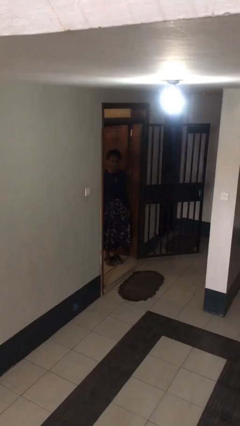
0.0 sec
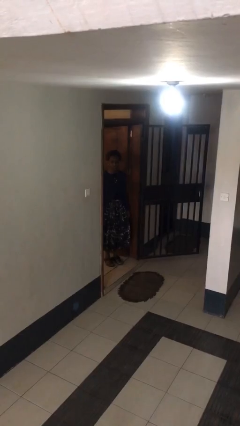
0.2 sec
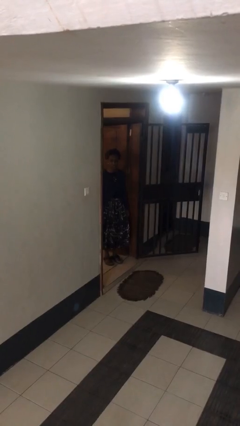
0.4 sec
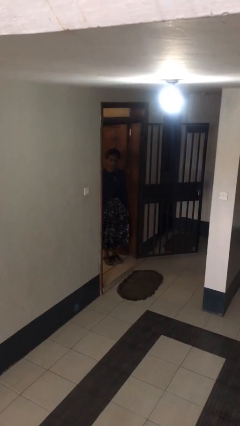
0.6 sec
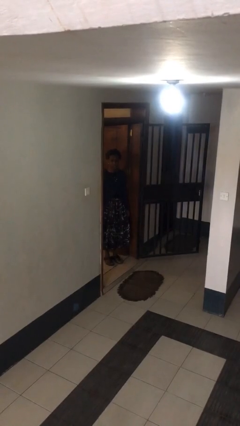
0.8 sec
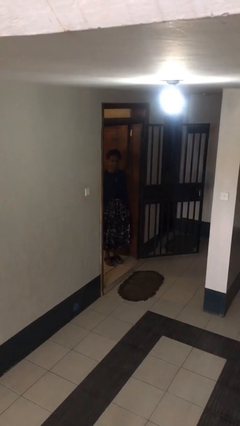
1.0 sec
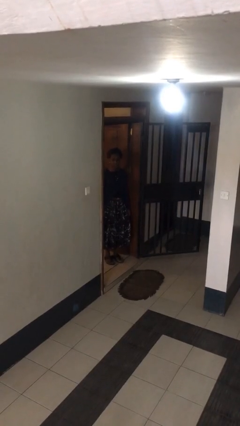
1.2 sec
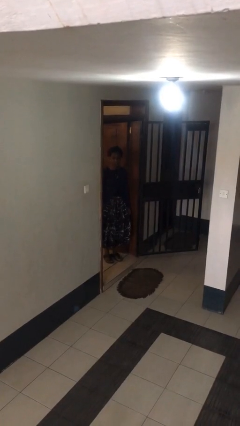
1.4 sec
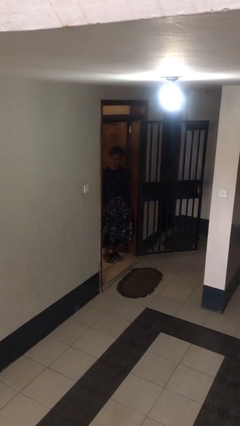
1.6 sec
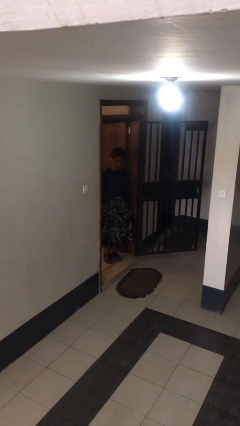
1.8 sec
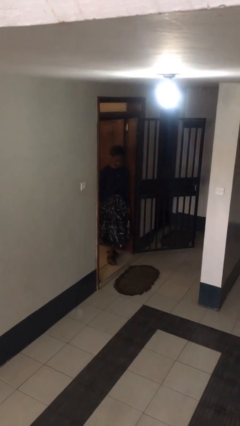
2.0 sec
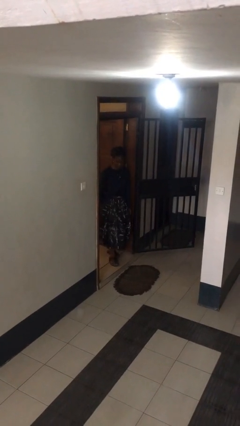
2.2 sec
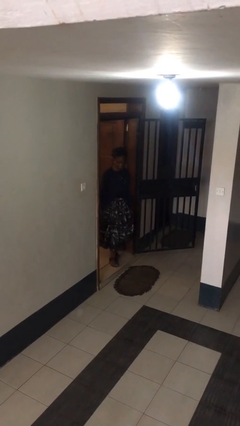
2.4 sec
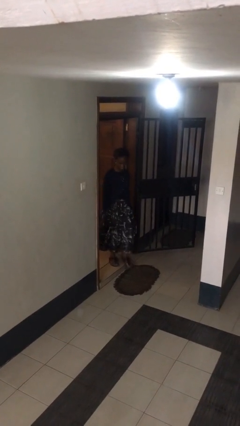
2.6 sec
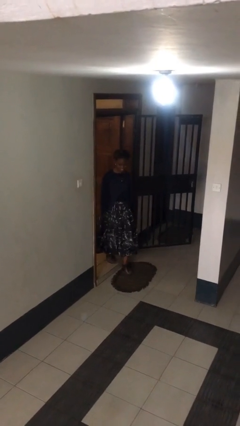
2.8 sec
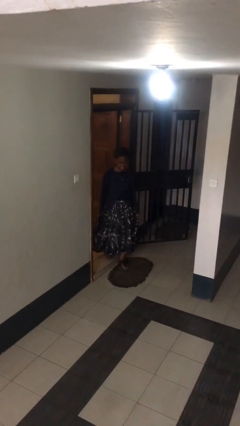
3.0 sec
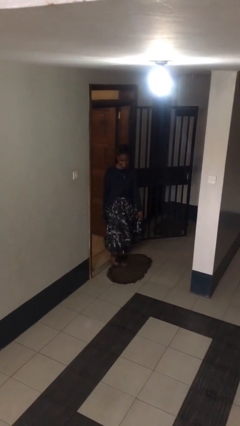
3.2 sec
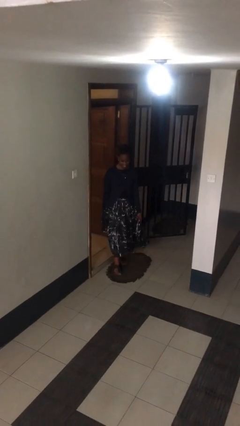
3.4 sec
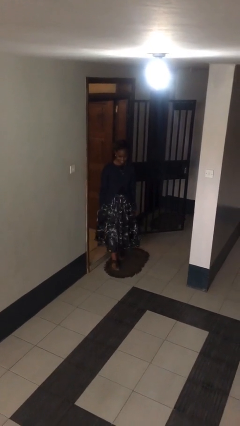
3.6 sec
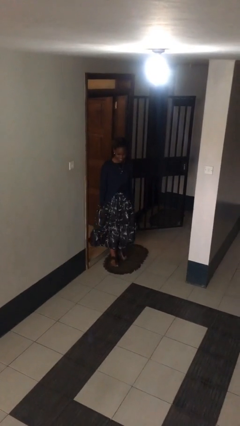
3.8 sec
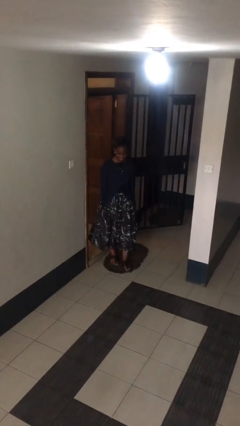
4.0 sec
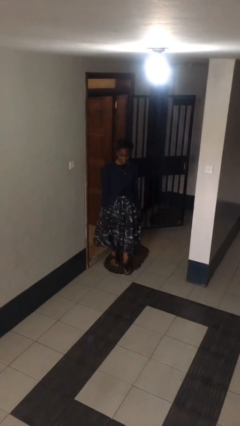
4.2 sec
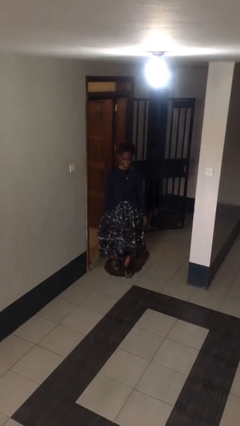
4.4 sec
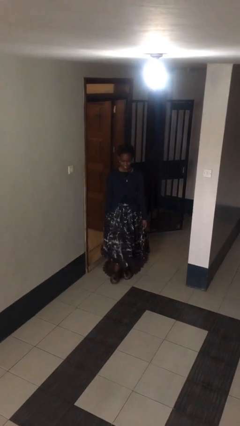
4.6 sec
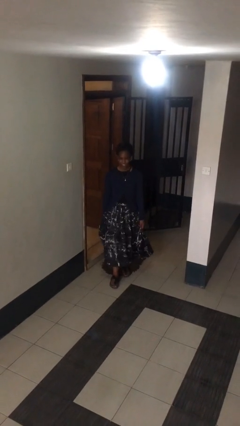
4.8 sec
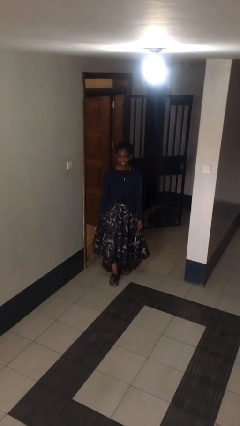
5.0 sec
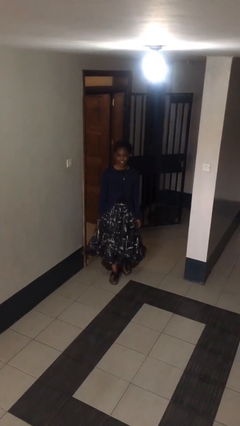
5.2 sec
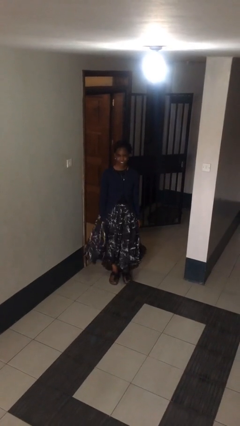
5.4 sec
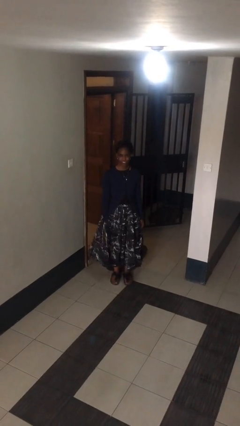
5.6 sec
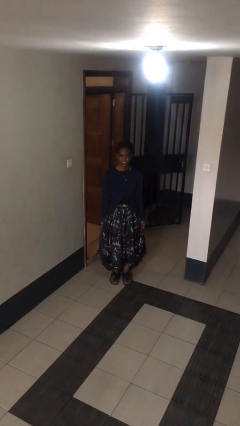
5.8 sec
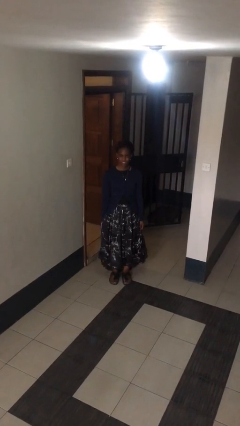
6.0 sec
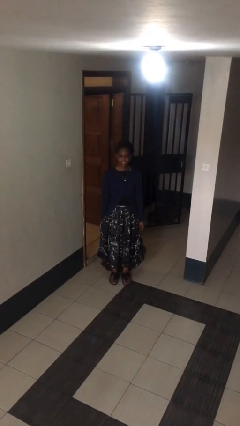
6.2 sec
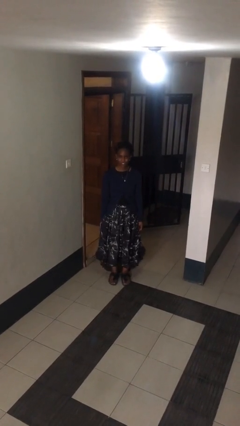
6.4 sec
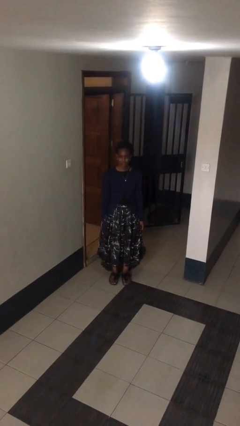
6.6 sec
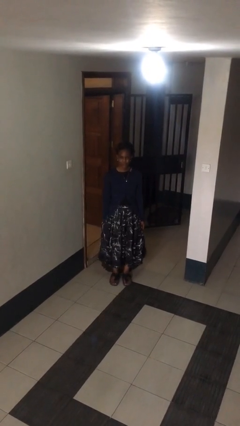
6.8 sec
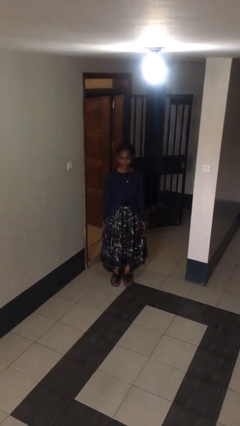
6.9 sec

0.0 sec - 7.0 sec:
person enters scene through structure

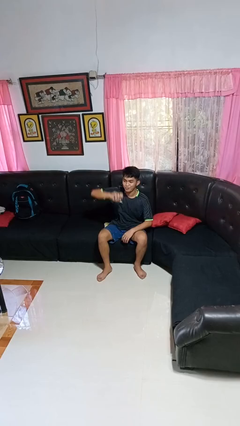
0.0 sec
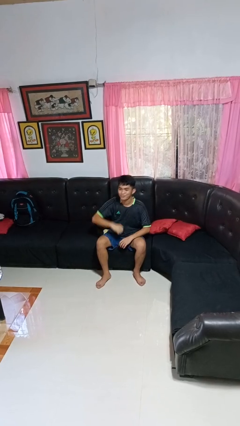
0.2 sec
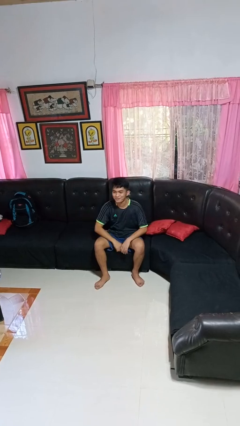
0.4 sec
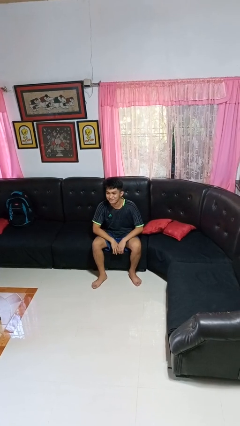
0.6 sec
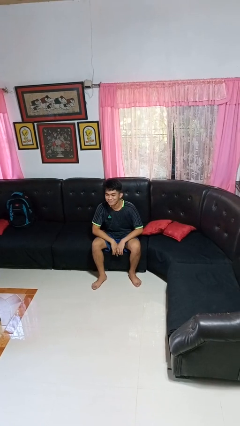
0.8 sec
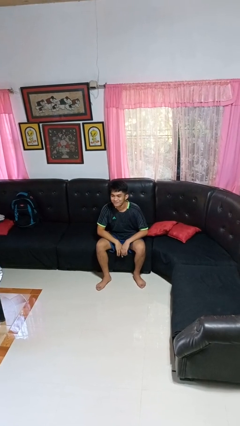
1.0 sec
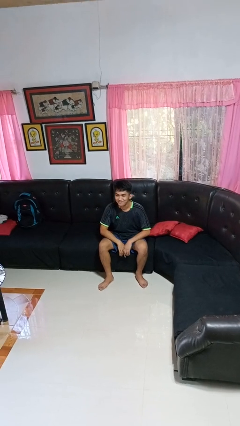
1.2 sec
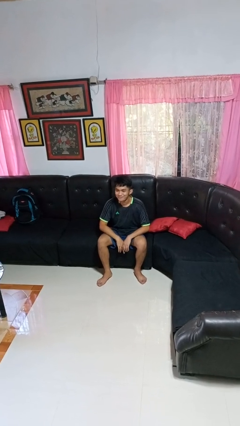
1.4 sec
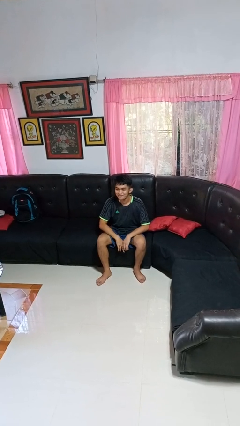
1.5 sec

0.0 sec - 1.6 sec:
person gestures lower hand

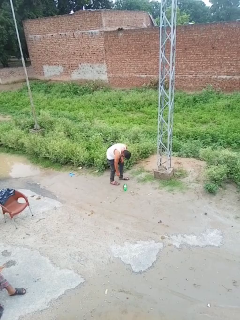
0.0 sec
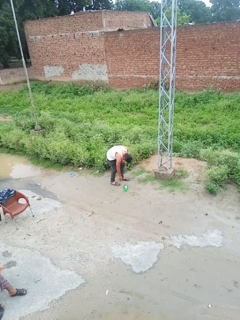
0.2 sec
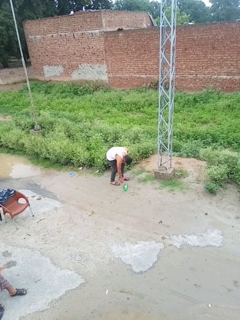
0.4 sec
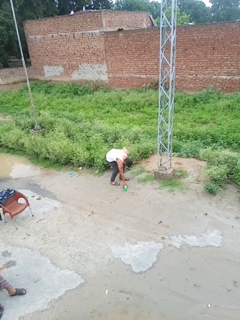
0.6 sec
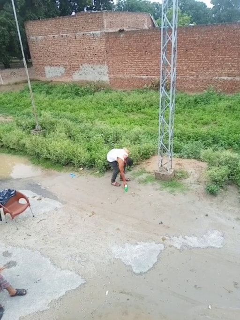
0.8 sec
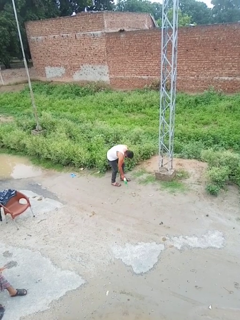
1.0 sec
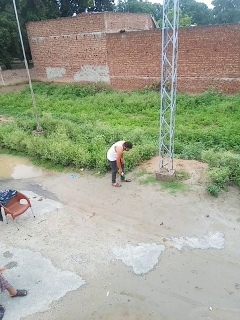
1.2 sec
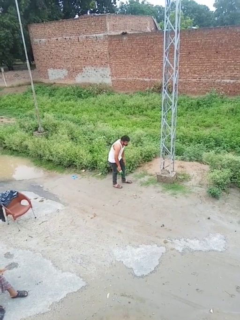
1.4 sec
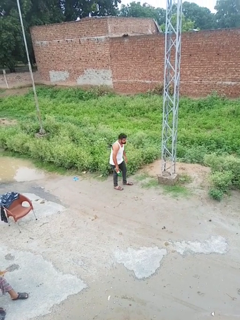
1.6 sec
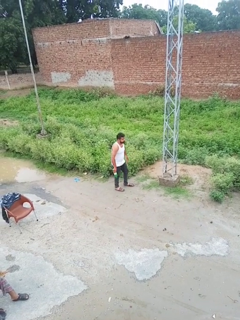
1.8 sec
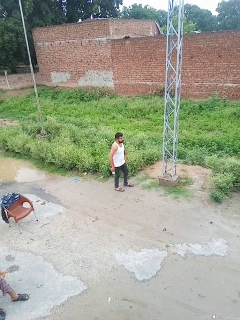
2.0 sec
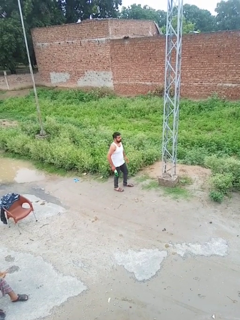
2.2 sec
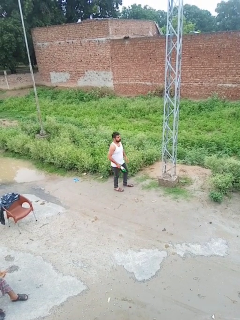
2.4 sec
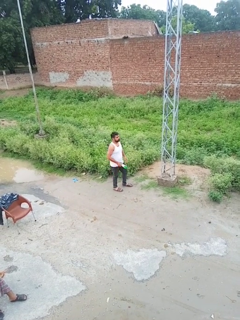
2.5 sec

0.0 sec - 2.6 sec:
person picks up object from floor

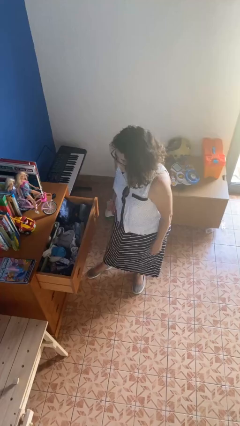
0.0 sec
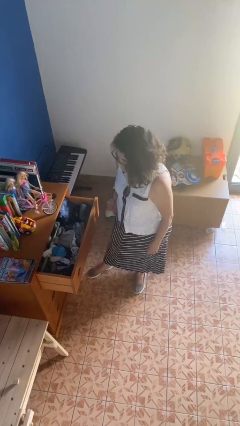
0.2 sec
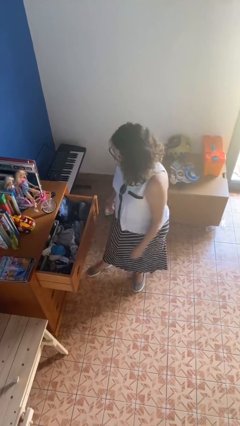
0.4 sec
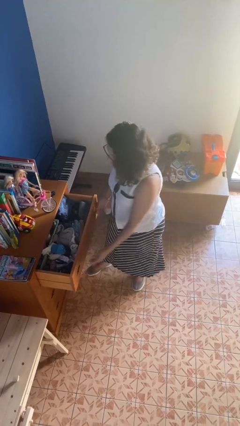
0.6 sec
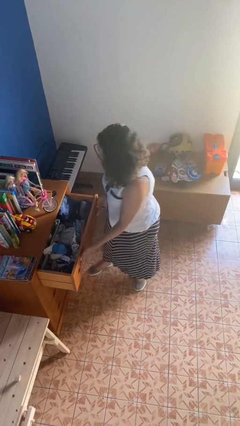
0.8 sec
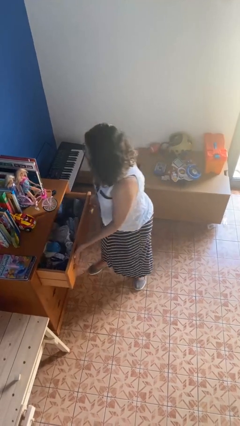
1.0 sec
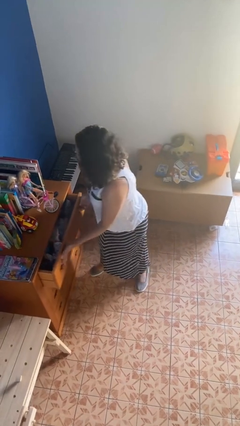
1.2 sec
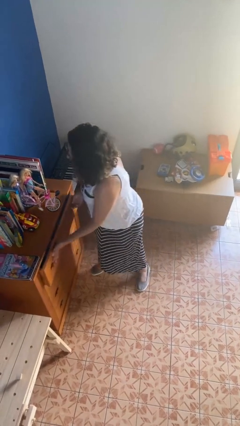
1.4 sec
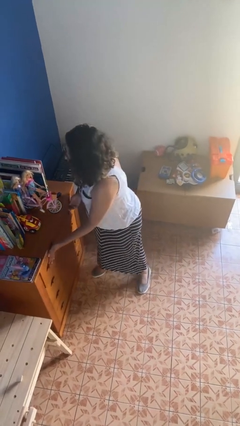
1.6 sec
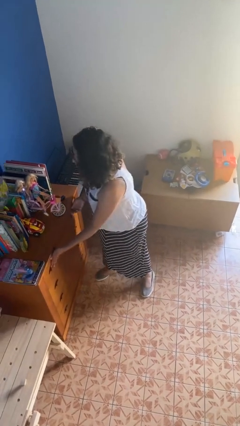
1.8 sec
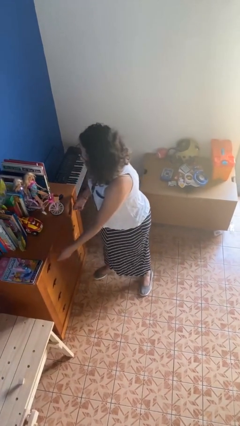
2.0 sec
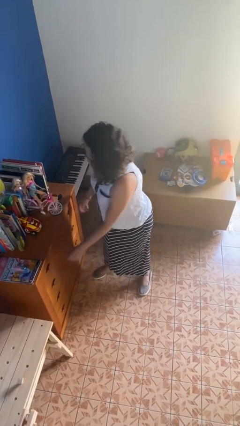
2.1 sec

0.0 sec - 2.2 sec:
person closes dresser drawer

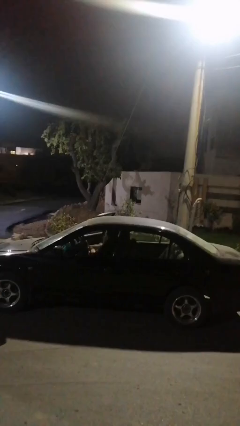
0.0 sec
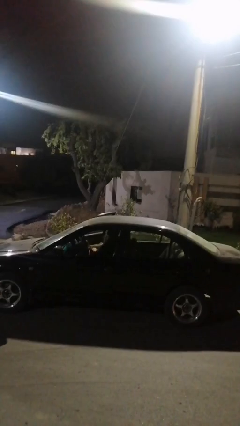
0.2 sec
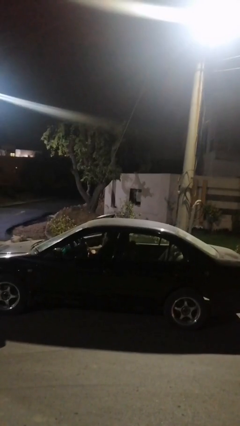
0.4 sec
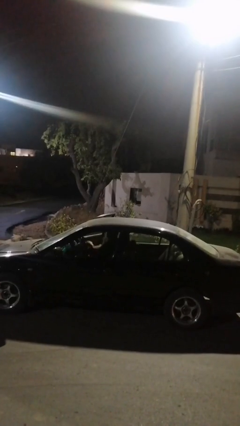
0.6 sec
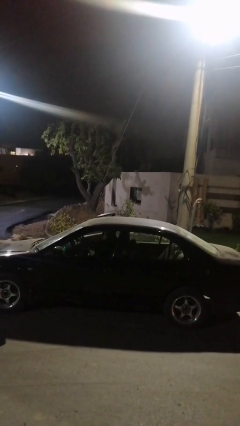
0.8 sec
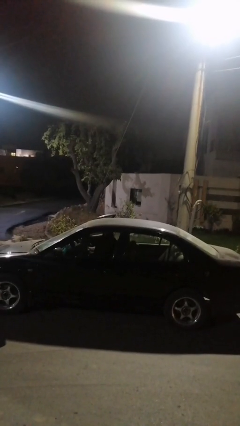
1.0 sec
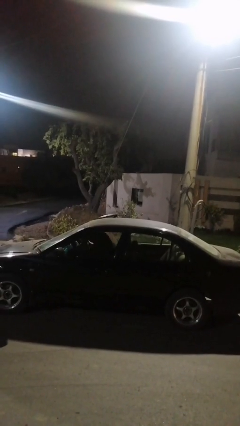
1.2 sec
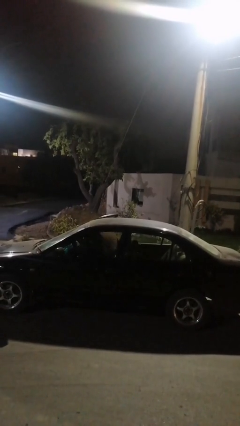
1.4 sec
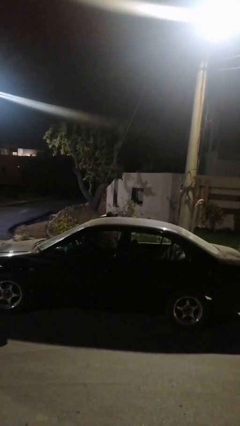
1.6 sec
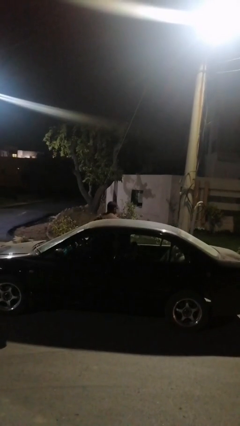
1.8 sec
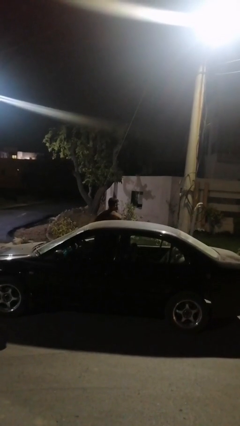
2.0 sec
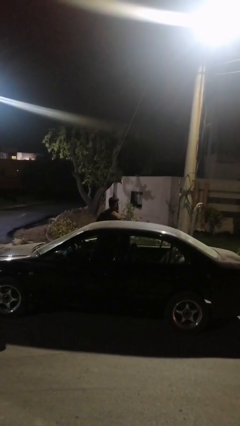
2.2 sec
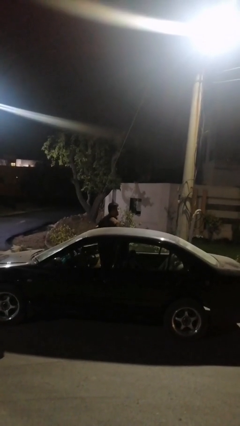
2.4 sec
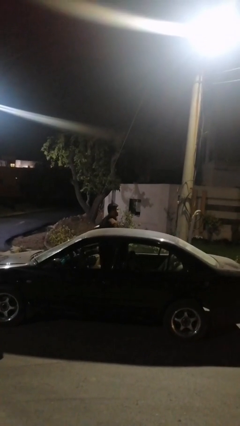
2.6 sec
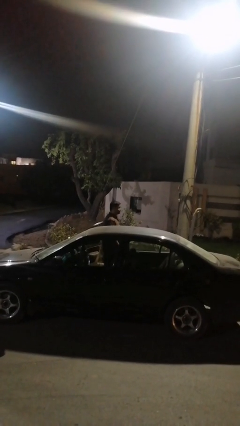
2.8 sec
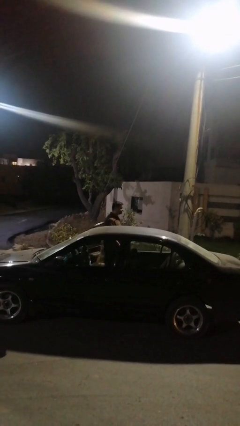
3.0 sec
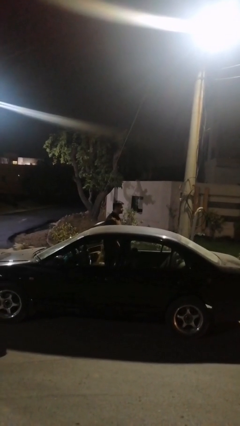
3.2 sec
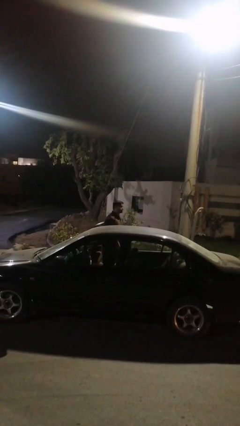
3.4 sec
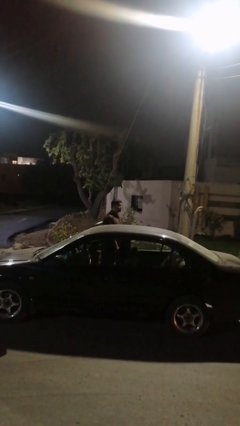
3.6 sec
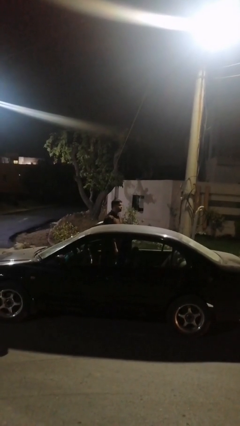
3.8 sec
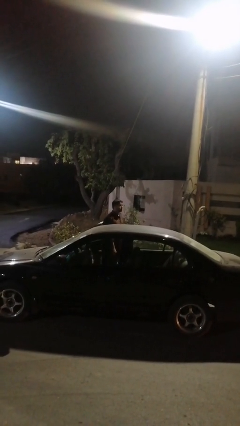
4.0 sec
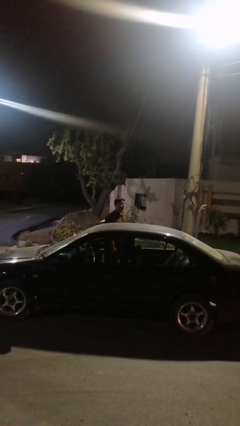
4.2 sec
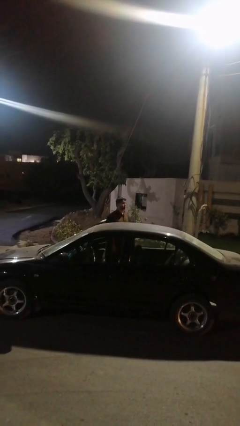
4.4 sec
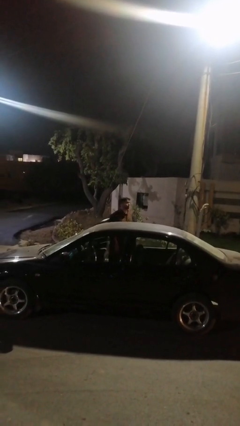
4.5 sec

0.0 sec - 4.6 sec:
person exits car
